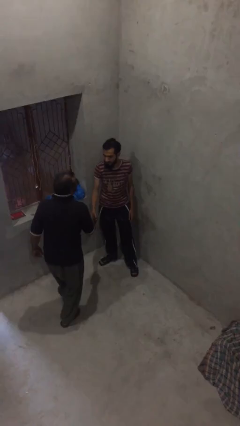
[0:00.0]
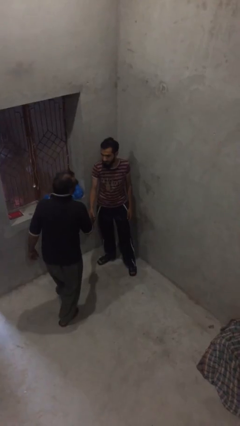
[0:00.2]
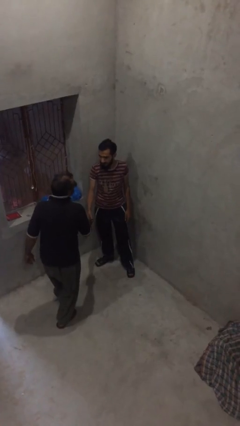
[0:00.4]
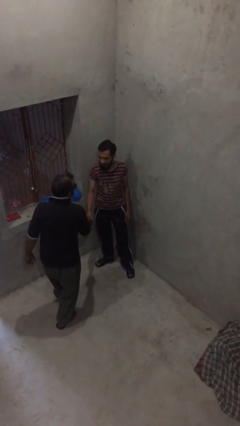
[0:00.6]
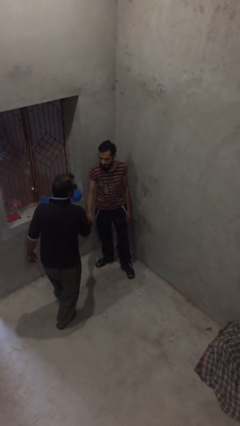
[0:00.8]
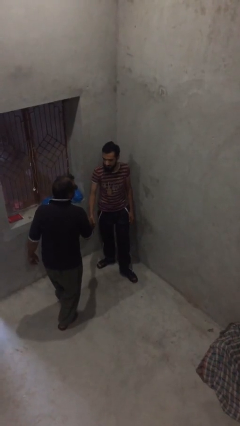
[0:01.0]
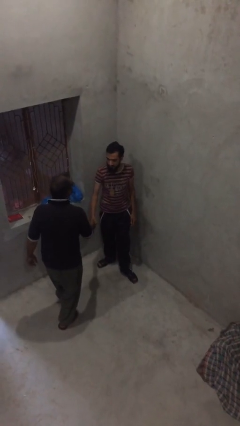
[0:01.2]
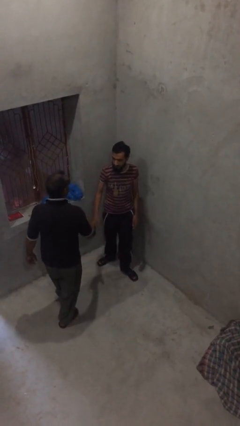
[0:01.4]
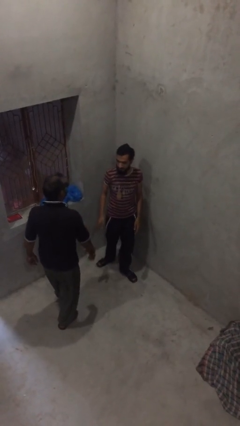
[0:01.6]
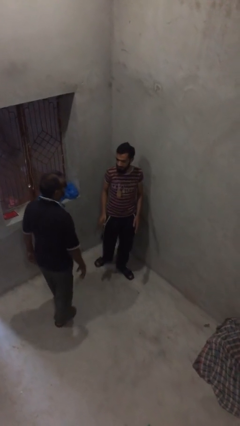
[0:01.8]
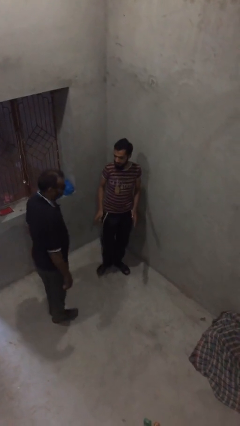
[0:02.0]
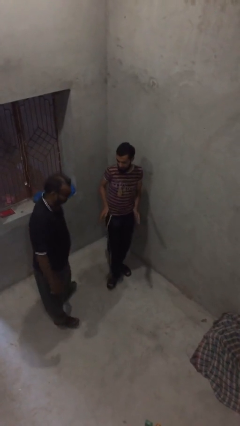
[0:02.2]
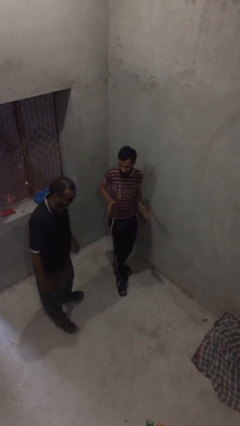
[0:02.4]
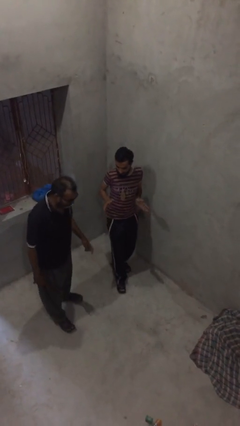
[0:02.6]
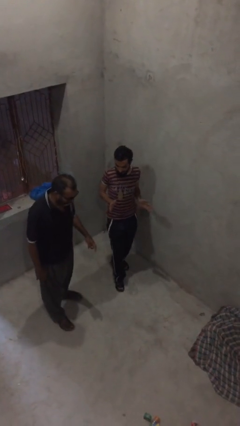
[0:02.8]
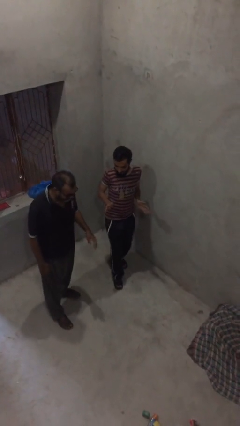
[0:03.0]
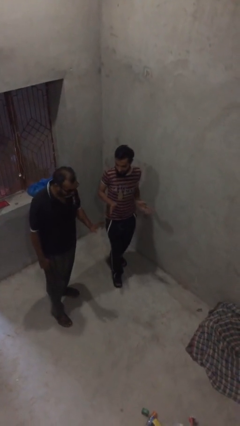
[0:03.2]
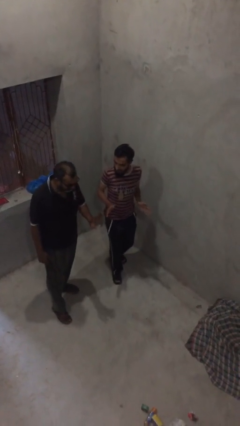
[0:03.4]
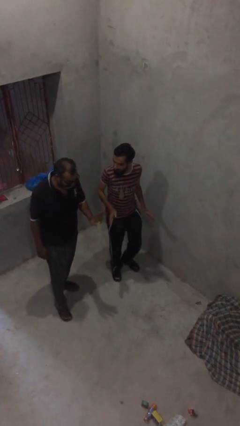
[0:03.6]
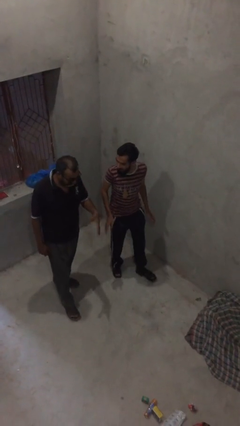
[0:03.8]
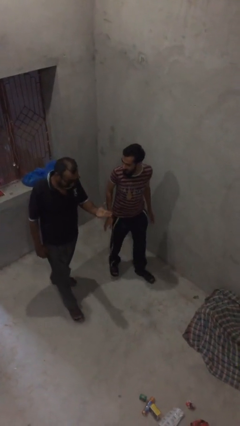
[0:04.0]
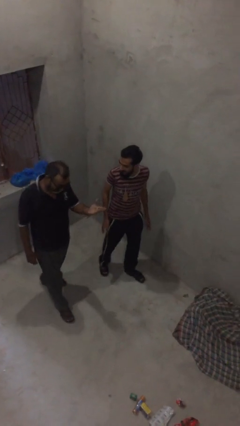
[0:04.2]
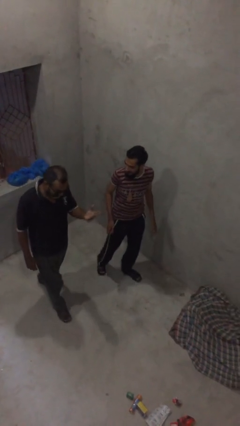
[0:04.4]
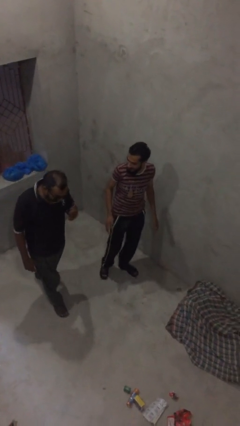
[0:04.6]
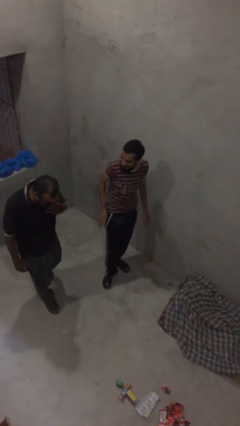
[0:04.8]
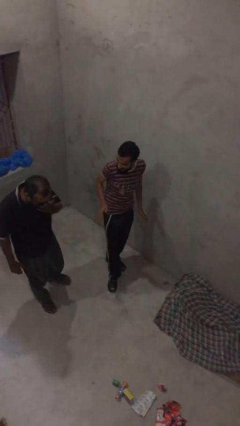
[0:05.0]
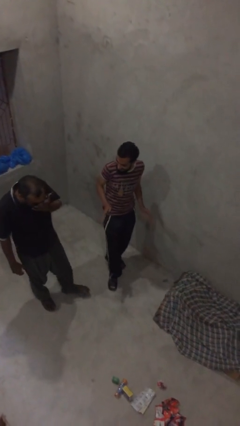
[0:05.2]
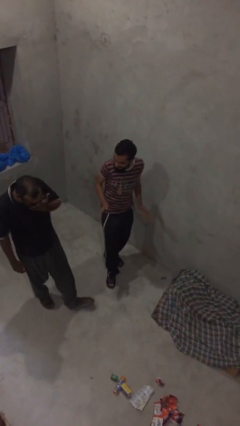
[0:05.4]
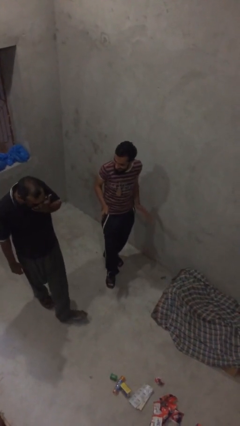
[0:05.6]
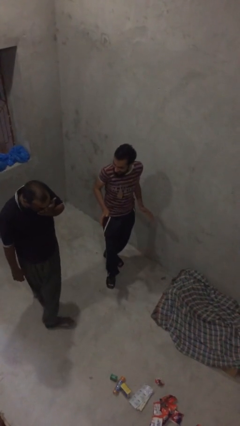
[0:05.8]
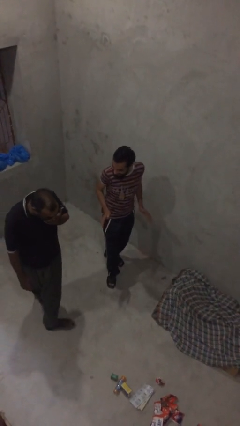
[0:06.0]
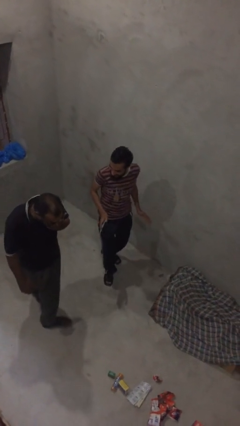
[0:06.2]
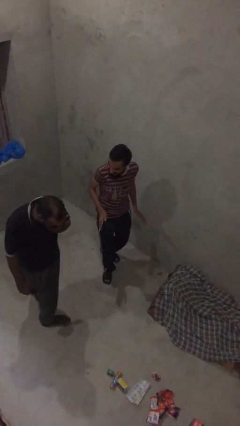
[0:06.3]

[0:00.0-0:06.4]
person talks to person

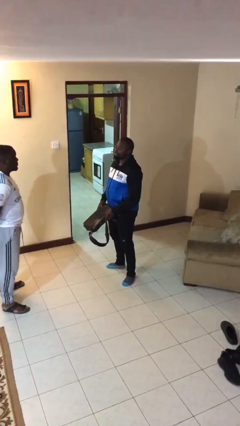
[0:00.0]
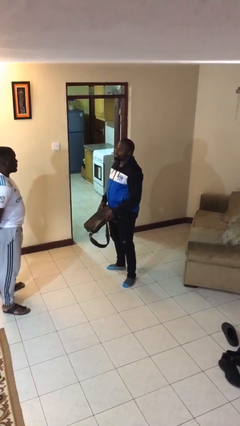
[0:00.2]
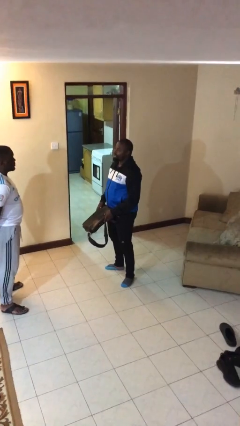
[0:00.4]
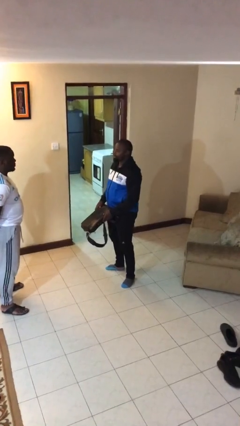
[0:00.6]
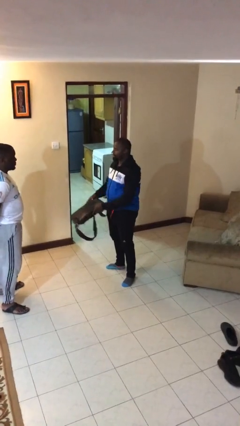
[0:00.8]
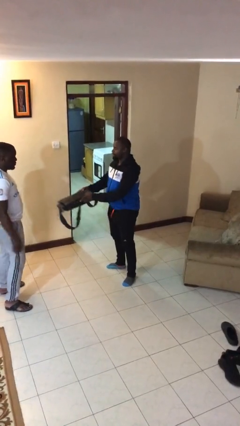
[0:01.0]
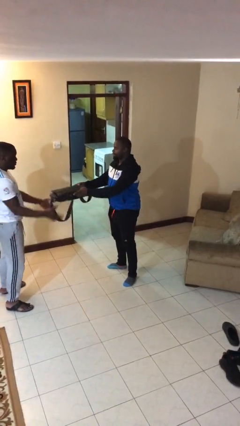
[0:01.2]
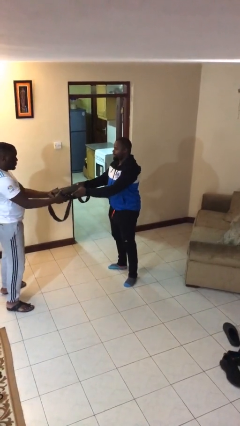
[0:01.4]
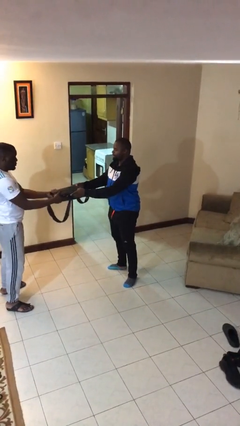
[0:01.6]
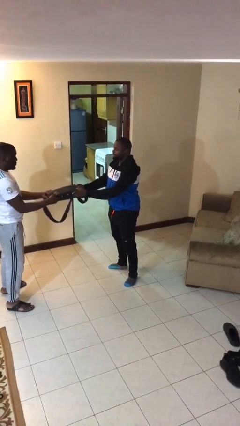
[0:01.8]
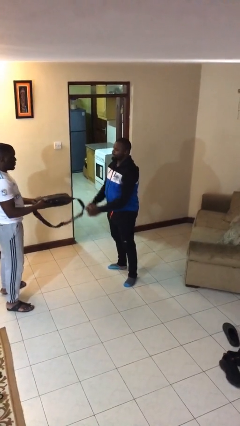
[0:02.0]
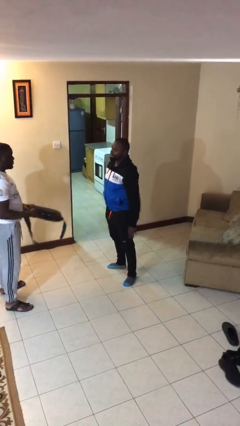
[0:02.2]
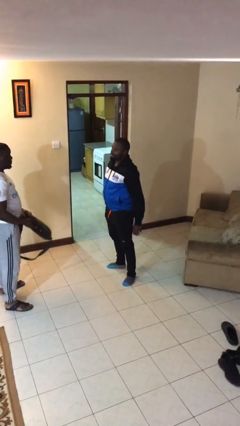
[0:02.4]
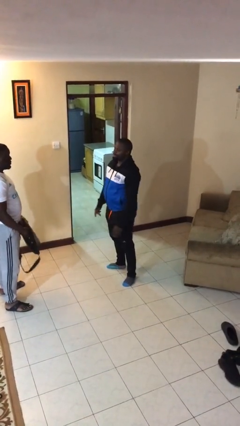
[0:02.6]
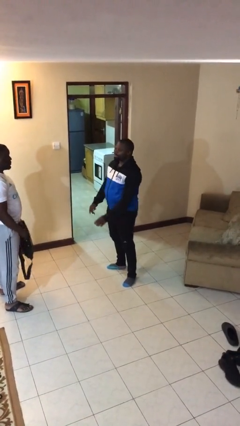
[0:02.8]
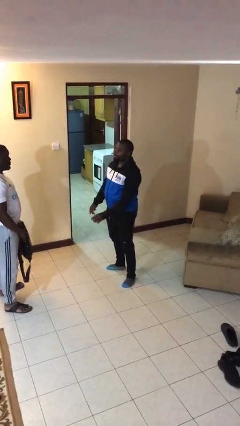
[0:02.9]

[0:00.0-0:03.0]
person transfers object to person

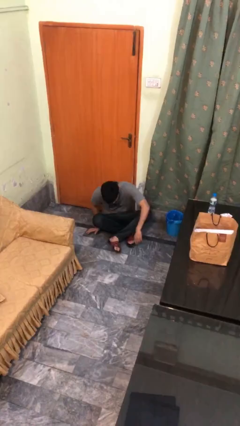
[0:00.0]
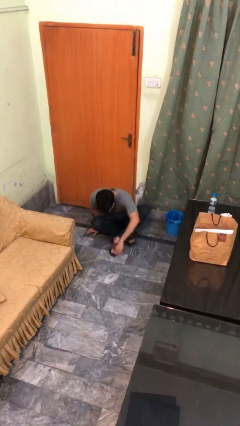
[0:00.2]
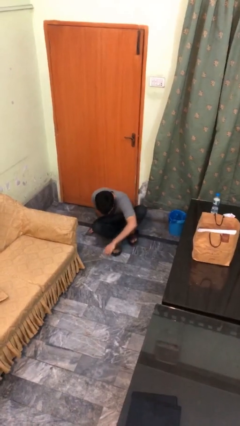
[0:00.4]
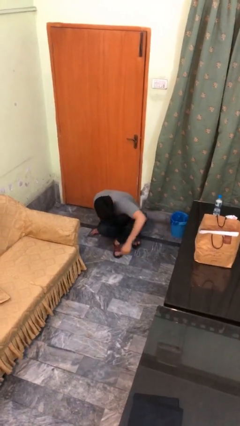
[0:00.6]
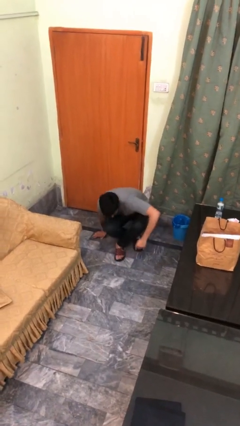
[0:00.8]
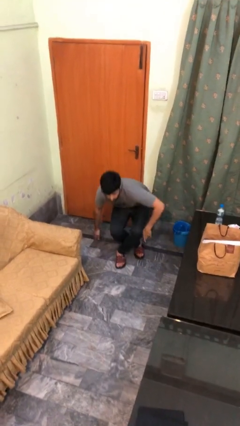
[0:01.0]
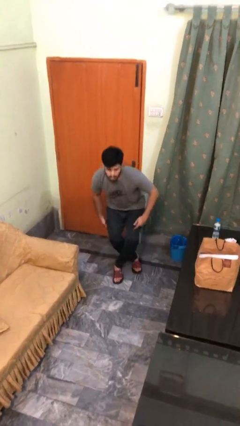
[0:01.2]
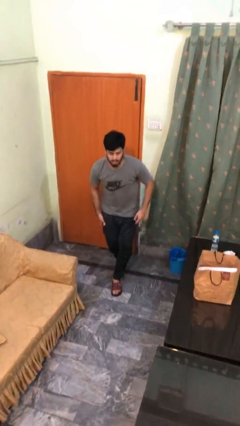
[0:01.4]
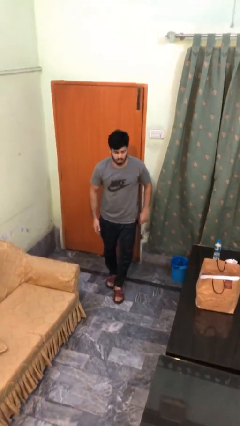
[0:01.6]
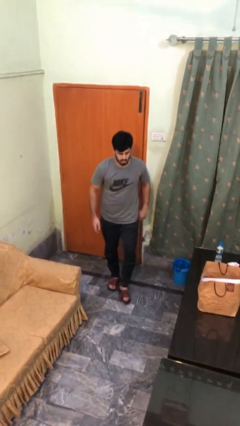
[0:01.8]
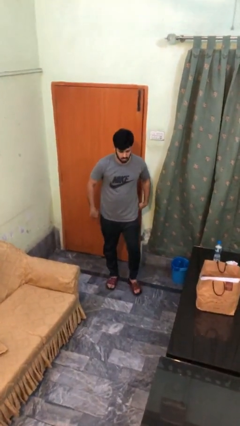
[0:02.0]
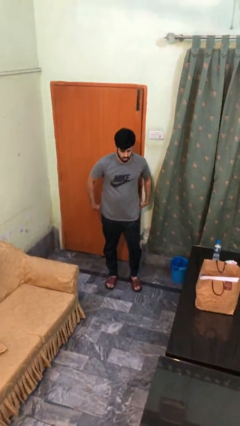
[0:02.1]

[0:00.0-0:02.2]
person stands up from floor

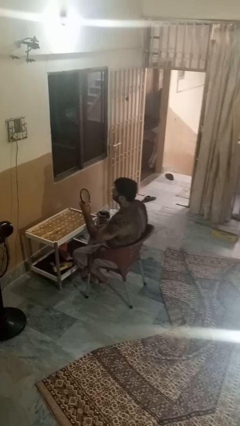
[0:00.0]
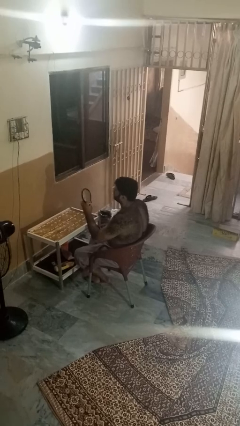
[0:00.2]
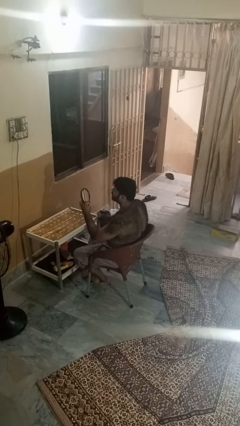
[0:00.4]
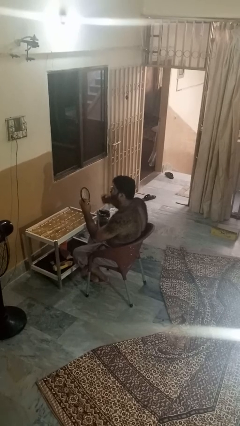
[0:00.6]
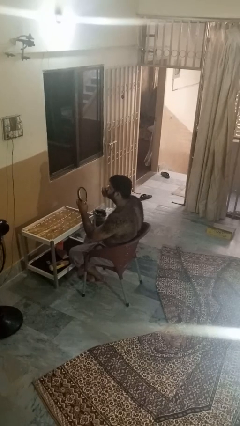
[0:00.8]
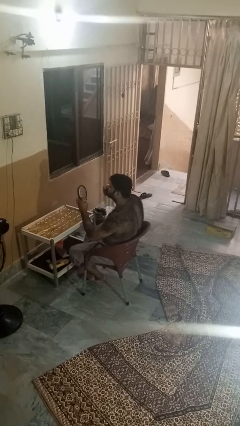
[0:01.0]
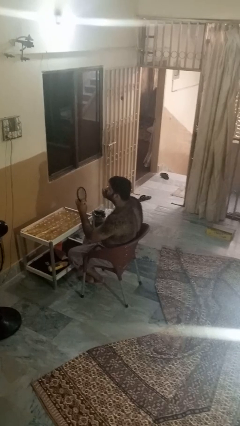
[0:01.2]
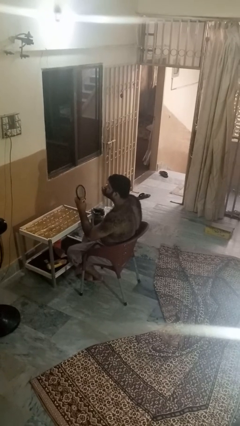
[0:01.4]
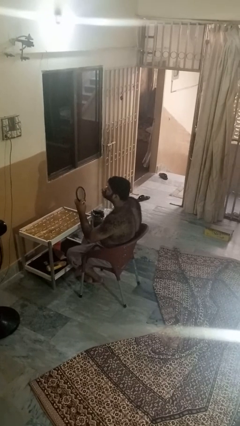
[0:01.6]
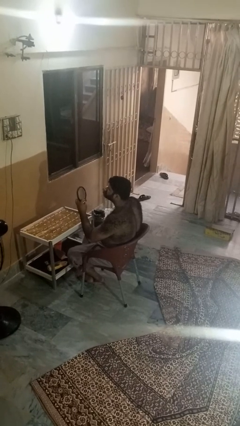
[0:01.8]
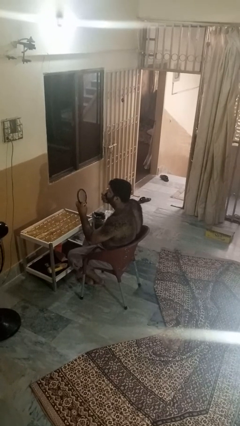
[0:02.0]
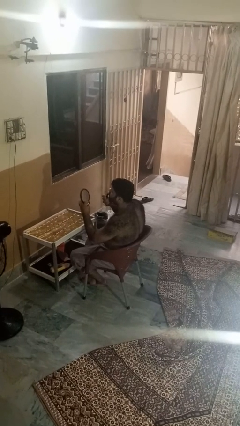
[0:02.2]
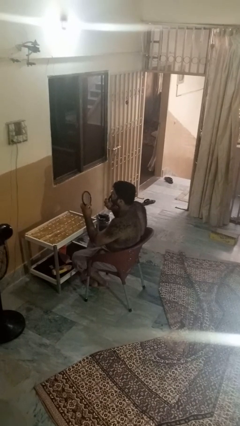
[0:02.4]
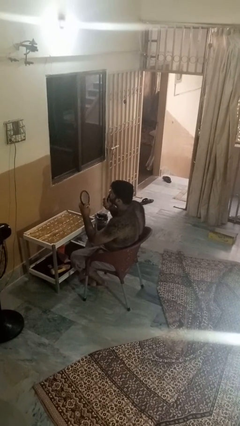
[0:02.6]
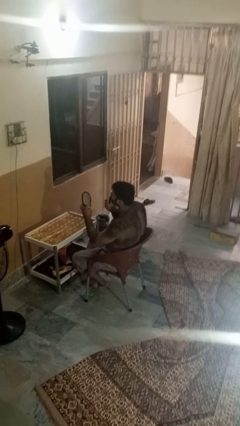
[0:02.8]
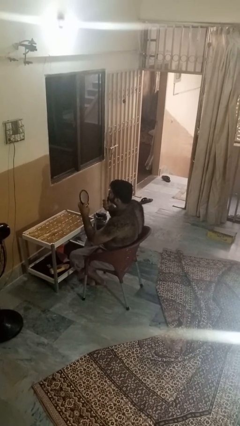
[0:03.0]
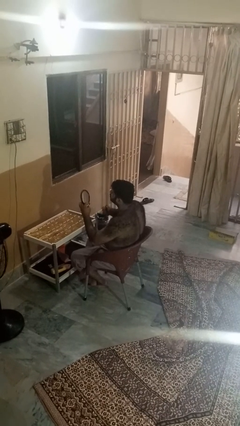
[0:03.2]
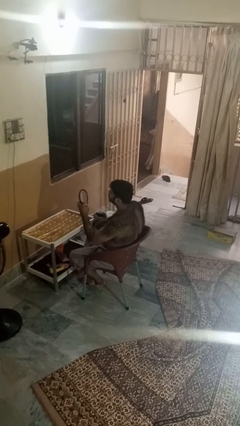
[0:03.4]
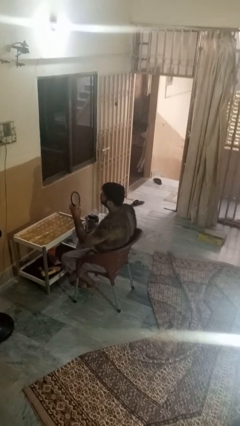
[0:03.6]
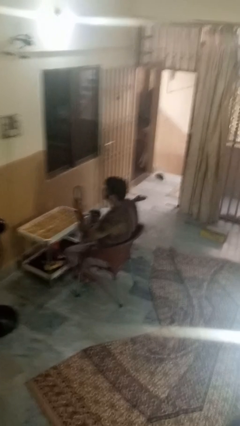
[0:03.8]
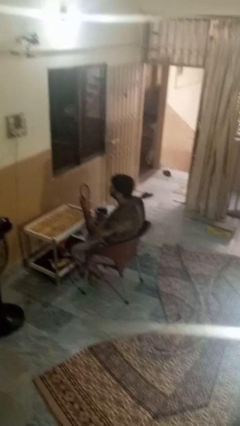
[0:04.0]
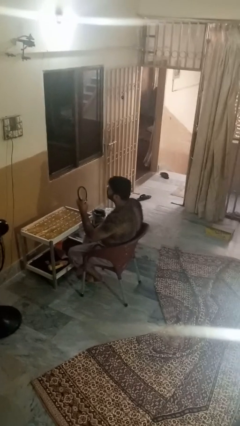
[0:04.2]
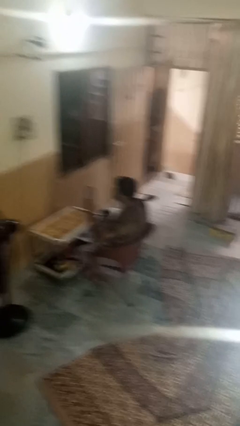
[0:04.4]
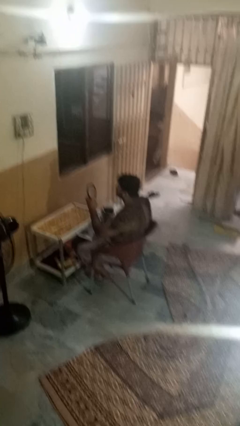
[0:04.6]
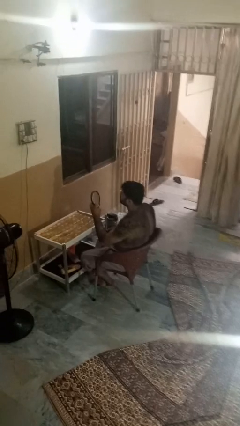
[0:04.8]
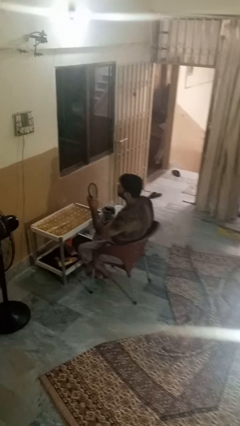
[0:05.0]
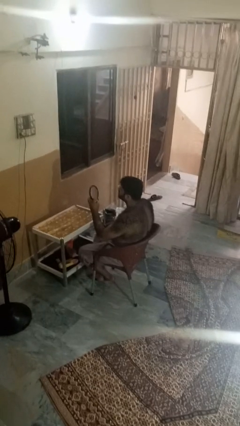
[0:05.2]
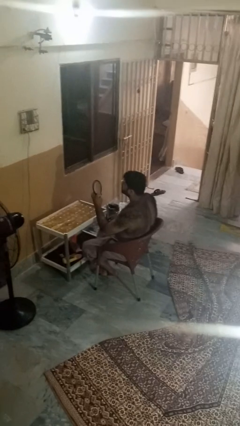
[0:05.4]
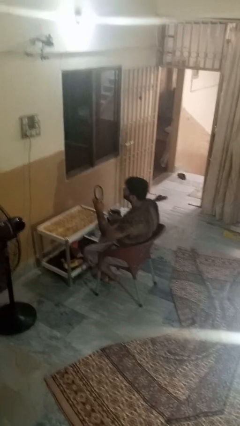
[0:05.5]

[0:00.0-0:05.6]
person applies lip makeup

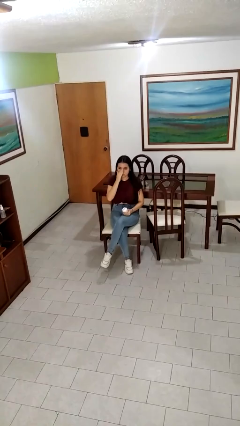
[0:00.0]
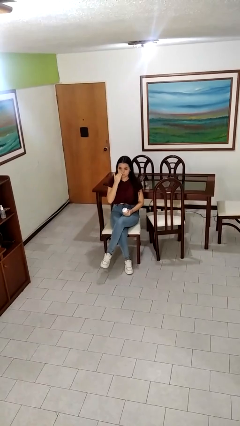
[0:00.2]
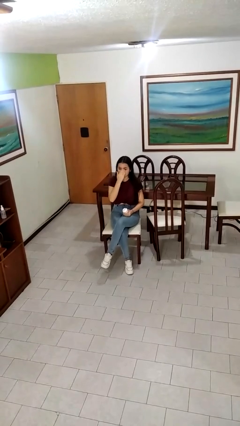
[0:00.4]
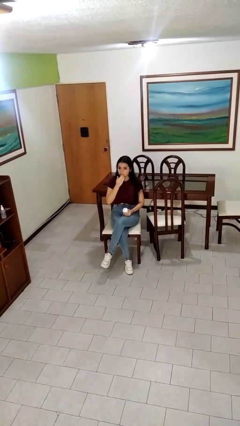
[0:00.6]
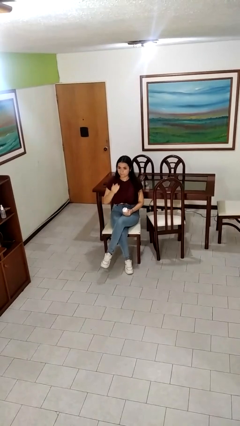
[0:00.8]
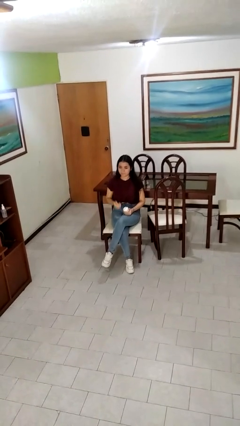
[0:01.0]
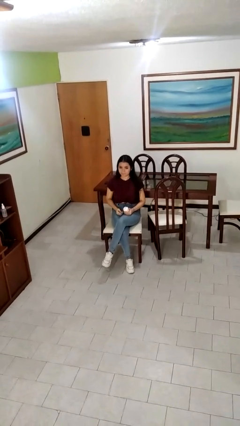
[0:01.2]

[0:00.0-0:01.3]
person applies facial moisturizer
